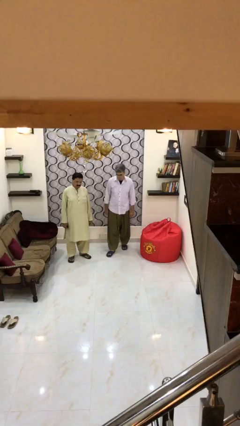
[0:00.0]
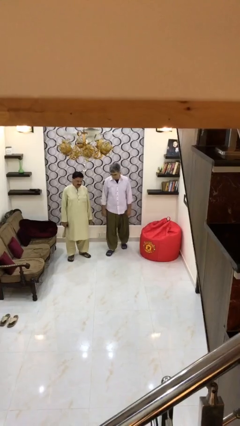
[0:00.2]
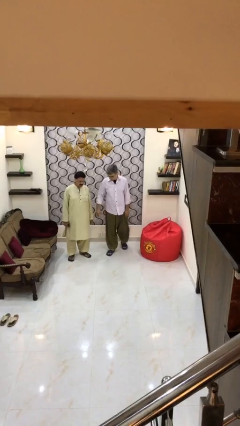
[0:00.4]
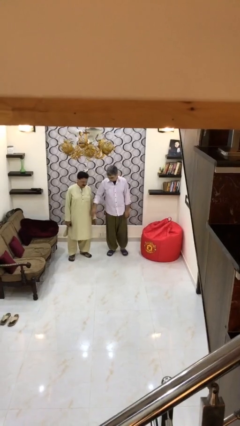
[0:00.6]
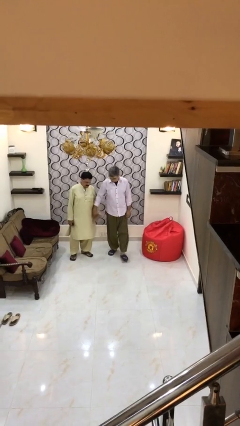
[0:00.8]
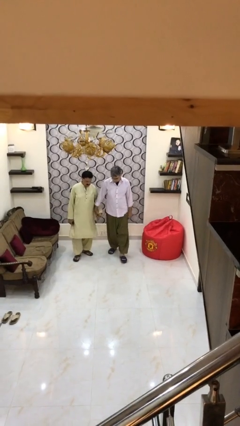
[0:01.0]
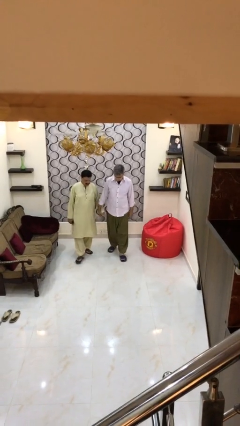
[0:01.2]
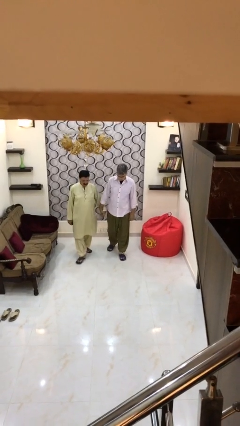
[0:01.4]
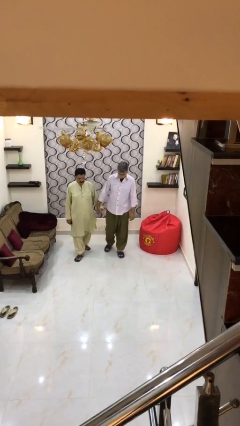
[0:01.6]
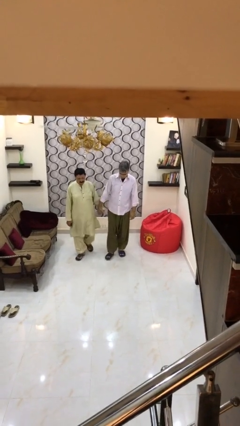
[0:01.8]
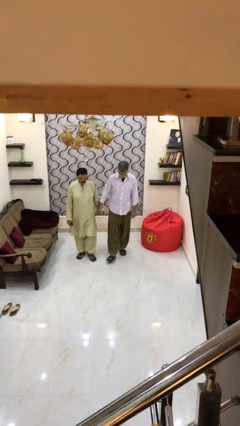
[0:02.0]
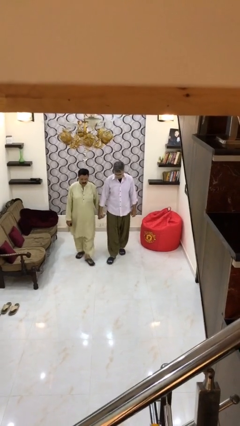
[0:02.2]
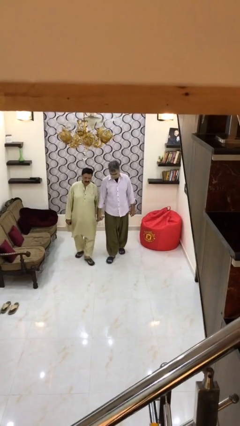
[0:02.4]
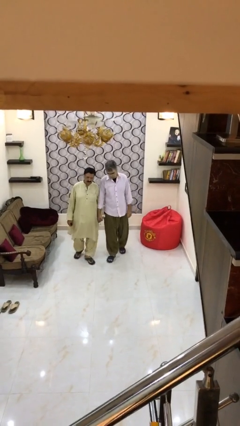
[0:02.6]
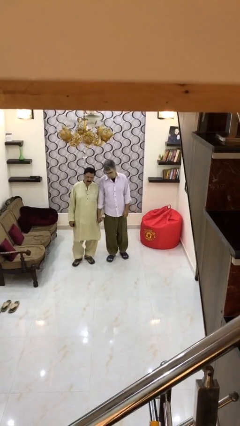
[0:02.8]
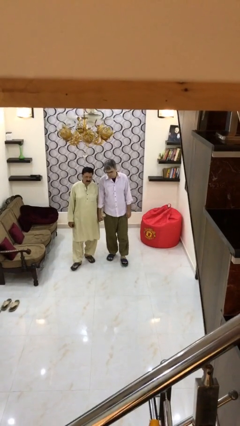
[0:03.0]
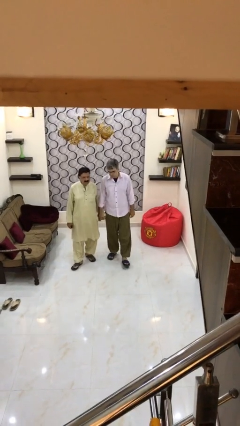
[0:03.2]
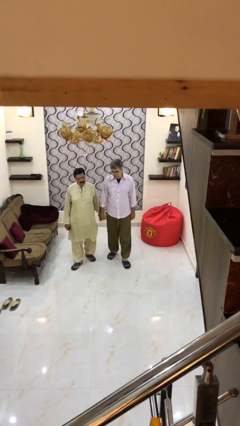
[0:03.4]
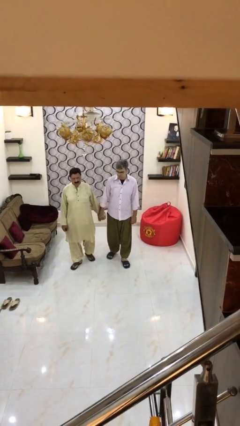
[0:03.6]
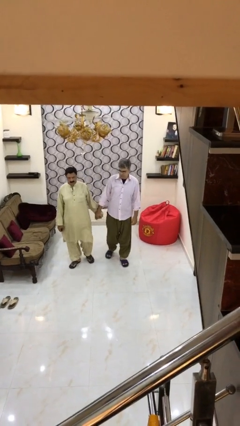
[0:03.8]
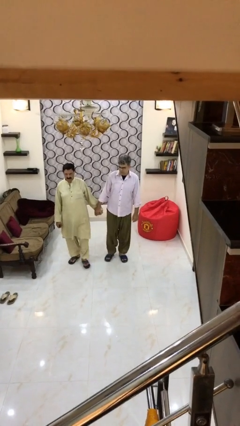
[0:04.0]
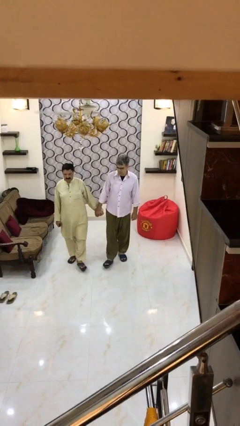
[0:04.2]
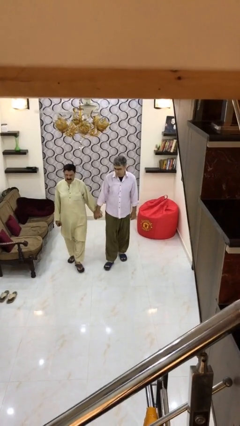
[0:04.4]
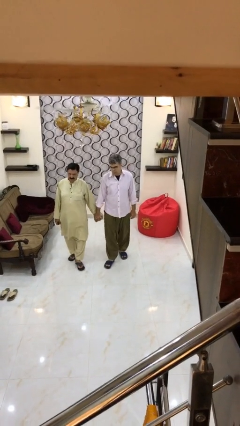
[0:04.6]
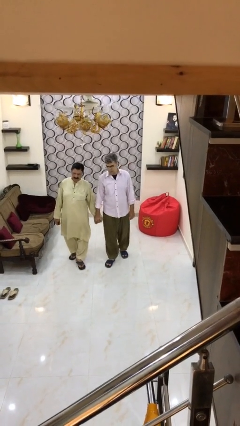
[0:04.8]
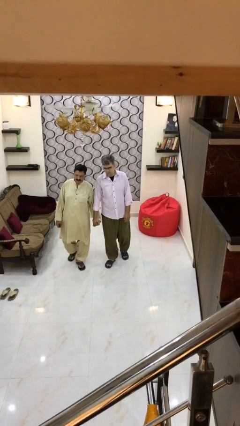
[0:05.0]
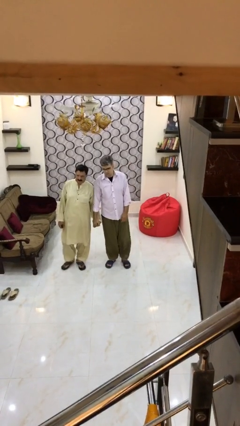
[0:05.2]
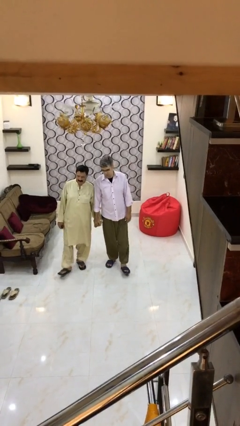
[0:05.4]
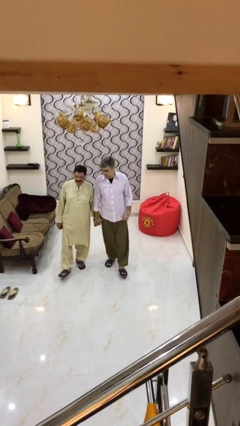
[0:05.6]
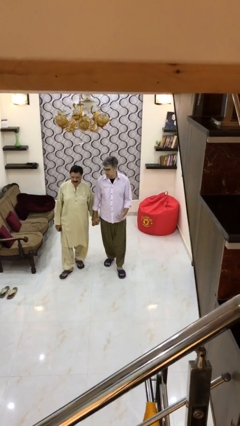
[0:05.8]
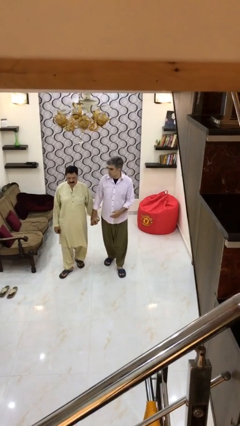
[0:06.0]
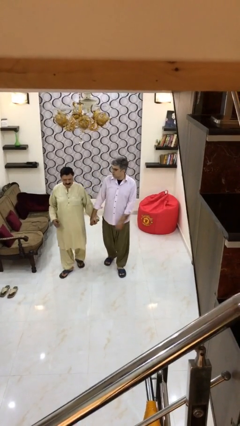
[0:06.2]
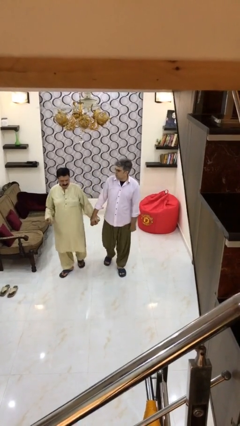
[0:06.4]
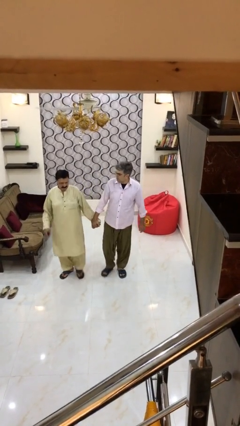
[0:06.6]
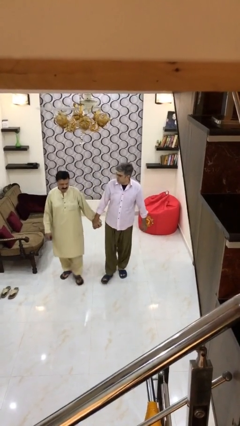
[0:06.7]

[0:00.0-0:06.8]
person holds hand

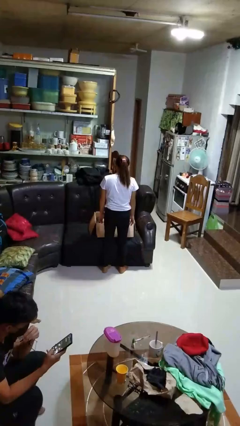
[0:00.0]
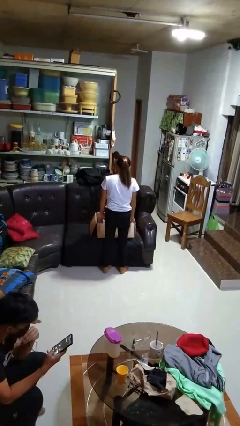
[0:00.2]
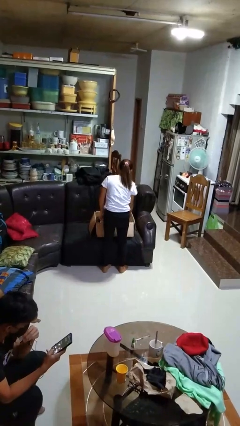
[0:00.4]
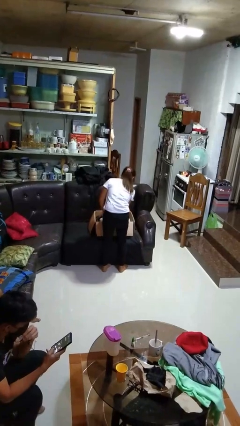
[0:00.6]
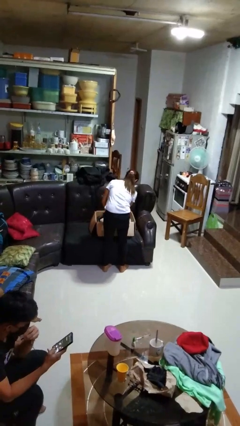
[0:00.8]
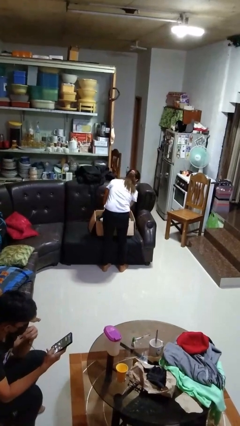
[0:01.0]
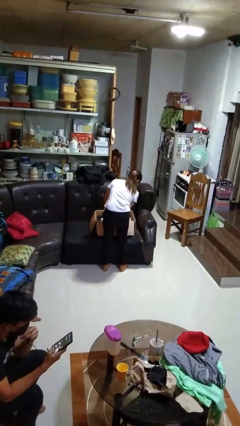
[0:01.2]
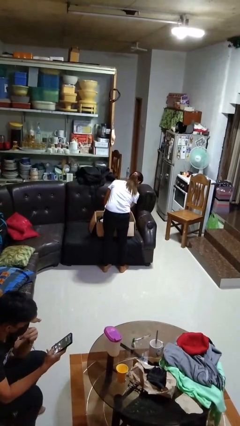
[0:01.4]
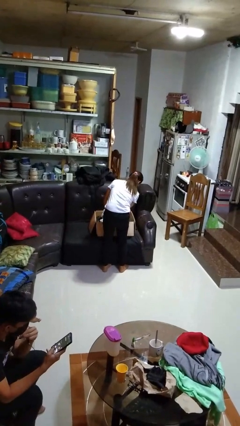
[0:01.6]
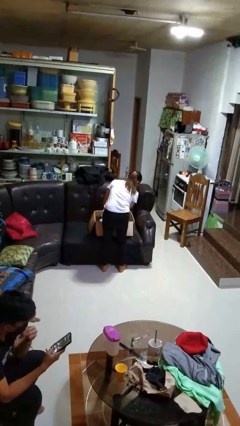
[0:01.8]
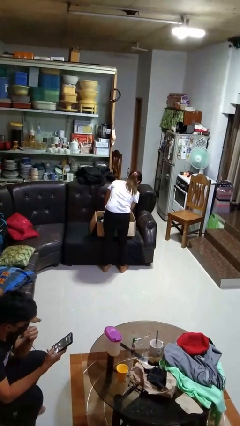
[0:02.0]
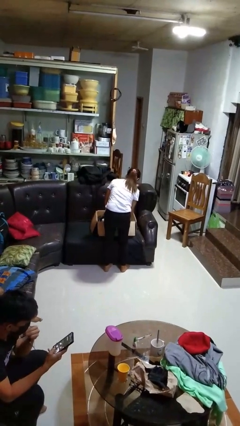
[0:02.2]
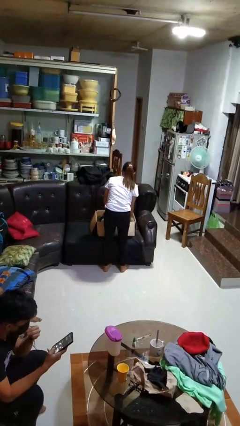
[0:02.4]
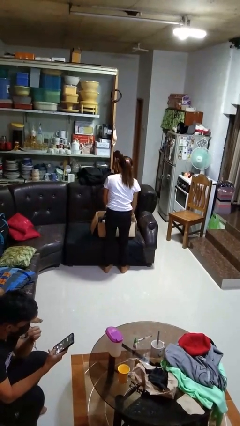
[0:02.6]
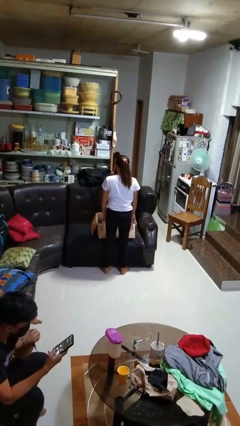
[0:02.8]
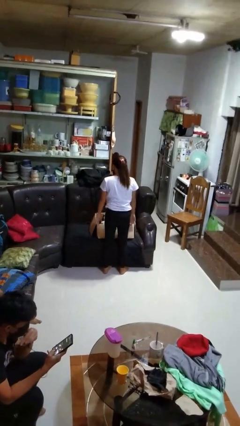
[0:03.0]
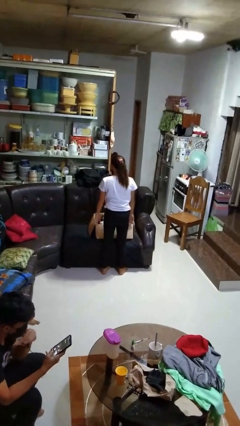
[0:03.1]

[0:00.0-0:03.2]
person searches in box

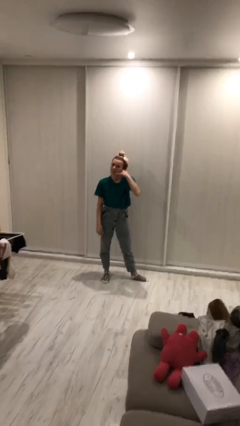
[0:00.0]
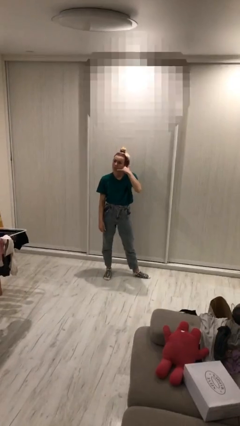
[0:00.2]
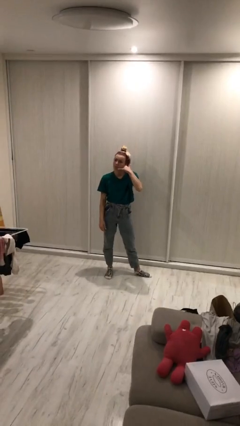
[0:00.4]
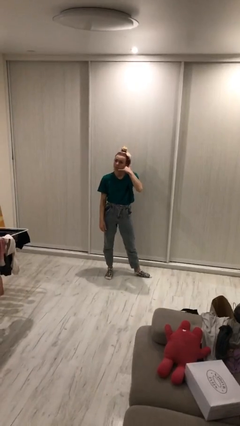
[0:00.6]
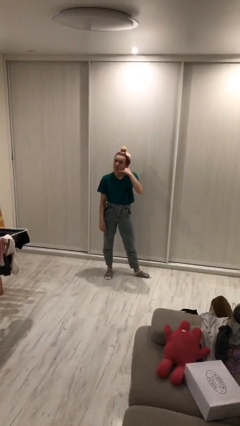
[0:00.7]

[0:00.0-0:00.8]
person gestures call me

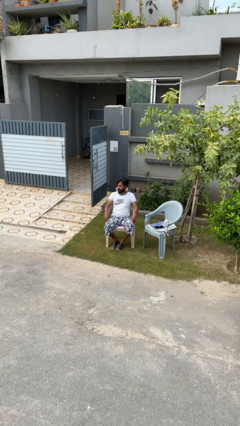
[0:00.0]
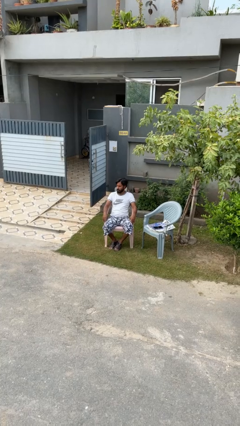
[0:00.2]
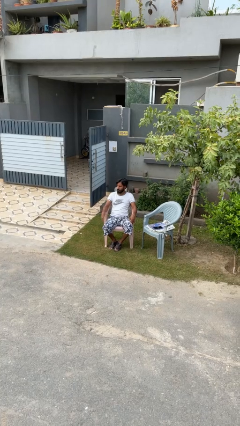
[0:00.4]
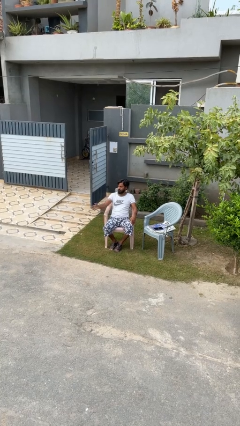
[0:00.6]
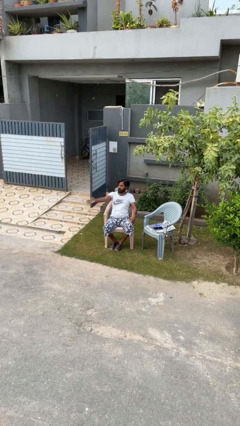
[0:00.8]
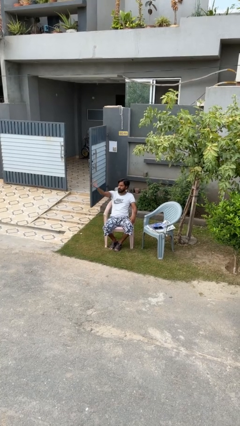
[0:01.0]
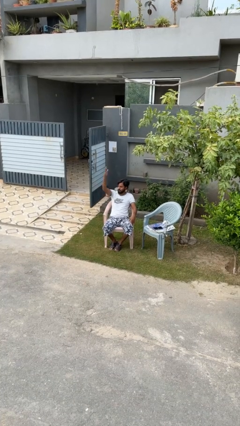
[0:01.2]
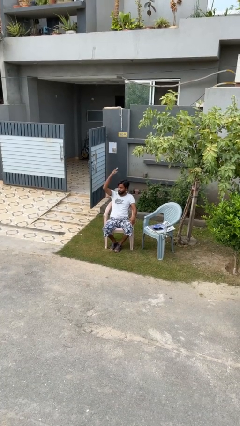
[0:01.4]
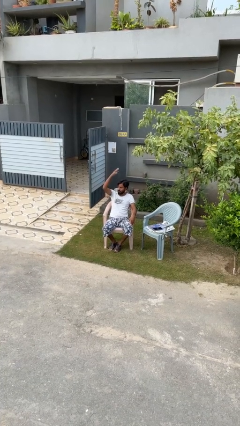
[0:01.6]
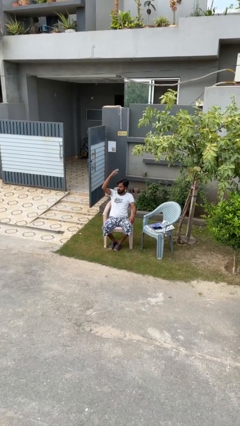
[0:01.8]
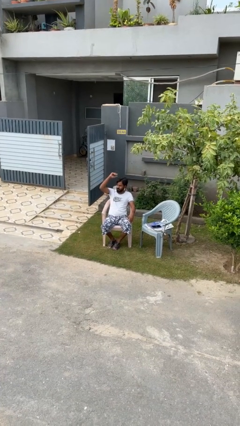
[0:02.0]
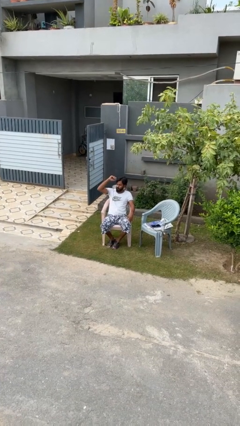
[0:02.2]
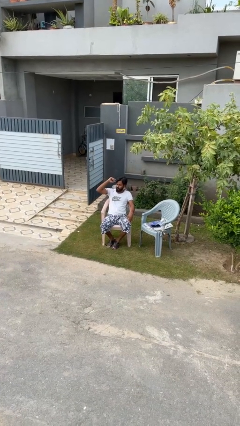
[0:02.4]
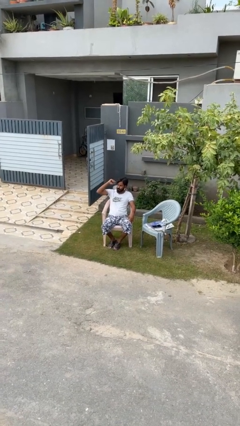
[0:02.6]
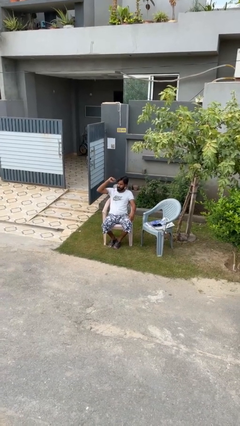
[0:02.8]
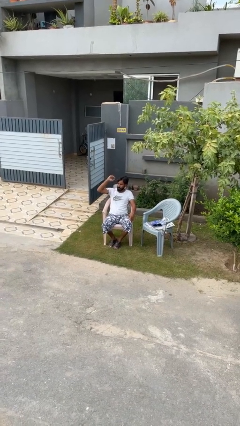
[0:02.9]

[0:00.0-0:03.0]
person gestures swipe up

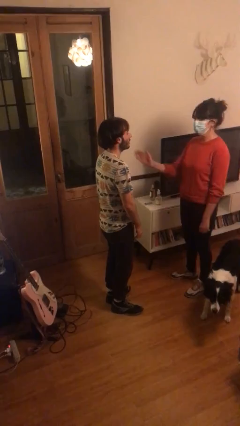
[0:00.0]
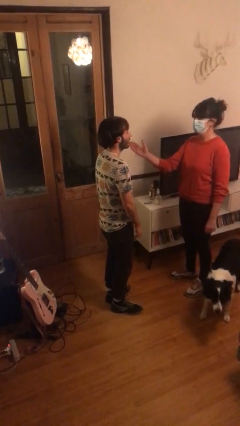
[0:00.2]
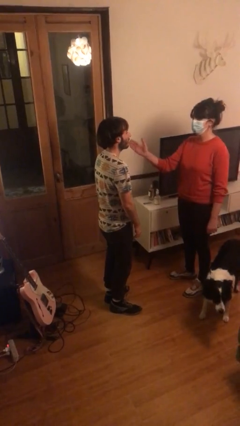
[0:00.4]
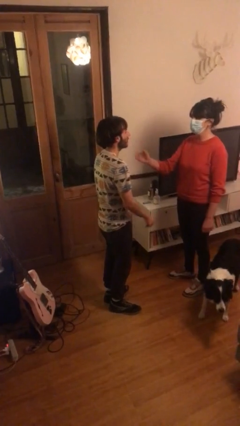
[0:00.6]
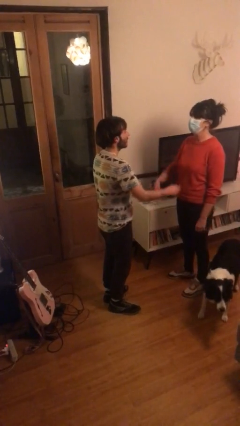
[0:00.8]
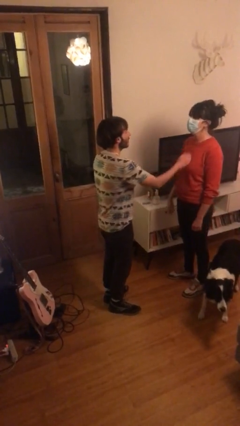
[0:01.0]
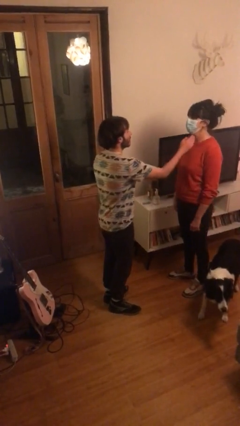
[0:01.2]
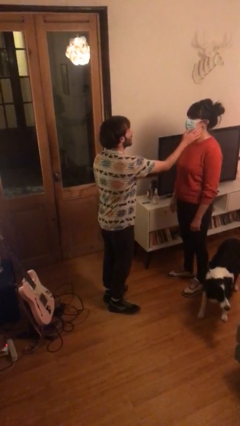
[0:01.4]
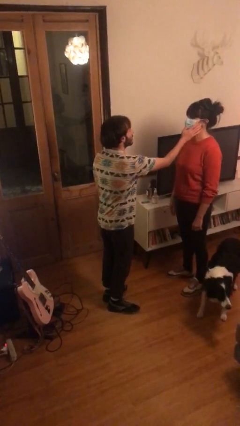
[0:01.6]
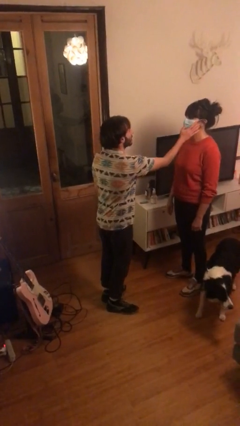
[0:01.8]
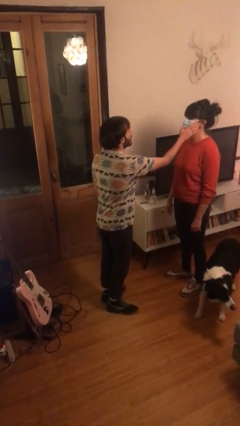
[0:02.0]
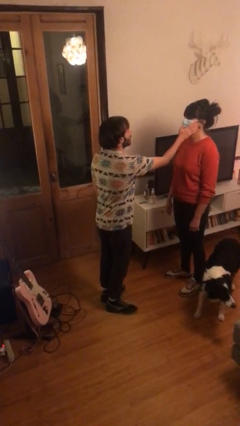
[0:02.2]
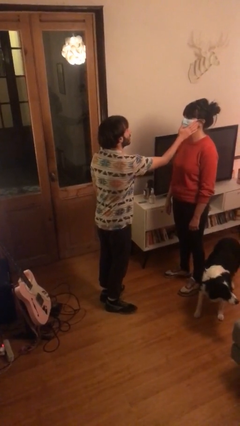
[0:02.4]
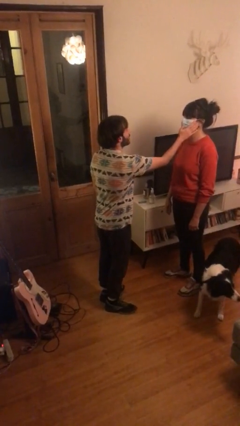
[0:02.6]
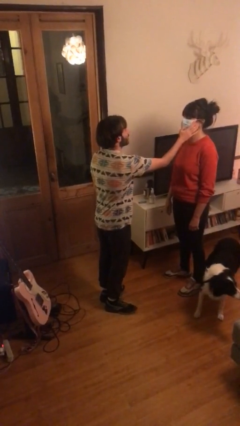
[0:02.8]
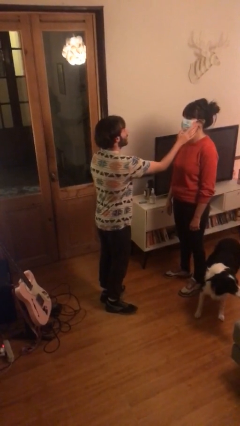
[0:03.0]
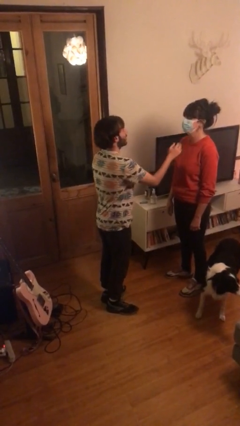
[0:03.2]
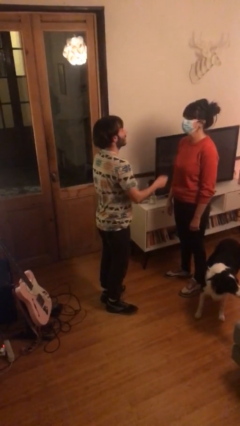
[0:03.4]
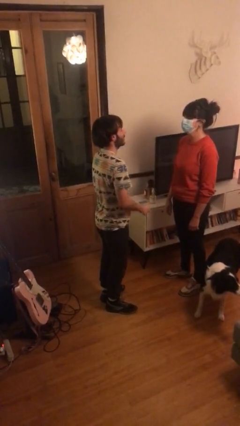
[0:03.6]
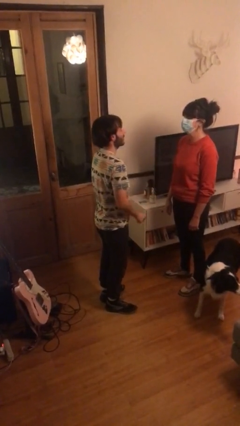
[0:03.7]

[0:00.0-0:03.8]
person touches face of person

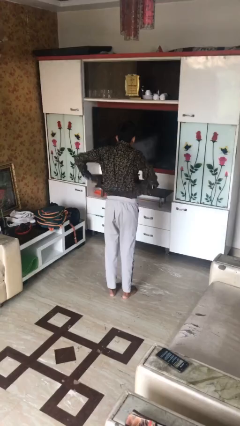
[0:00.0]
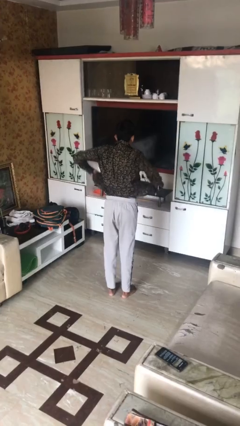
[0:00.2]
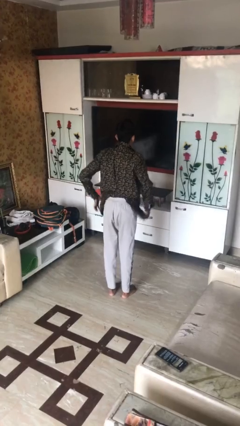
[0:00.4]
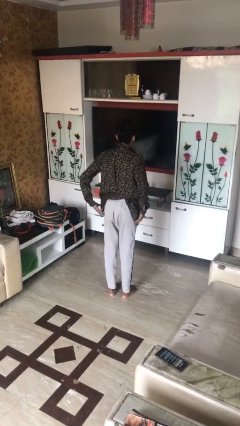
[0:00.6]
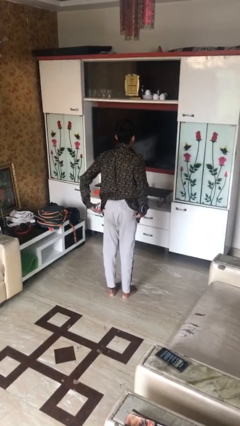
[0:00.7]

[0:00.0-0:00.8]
person untucks shirt
